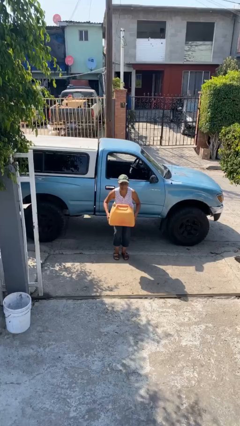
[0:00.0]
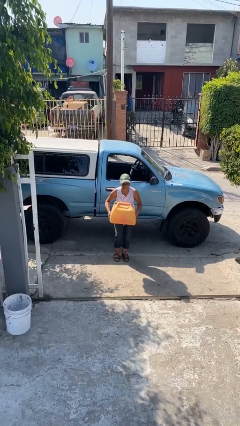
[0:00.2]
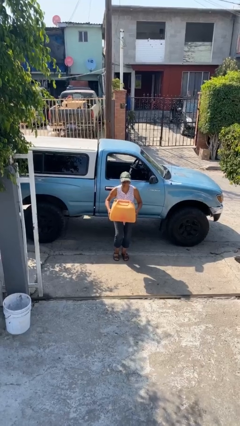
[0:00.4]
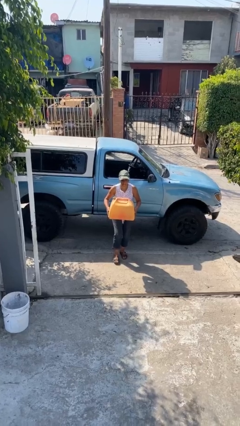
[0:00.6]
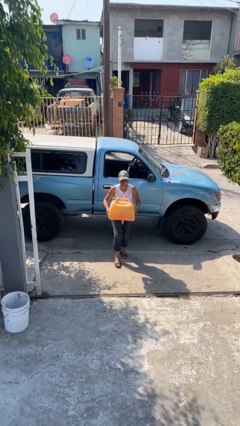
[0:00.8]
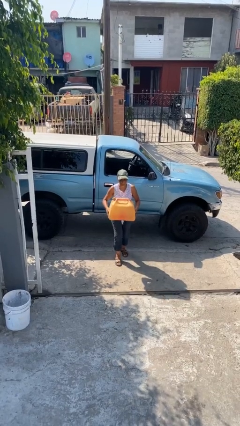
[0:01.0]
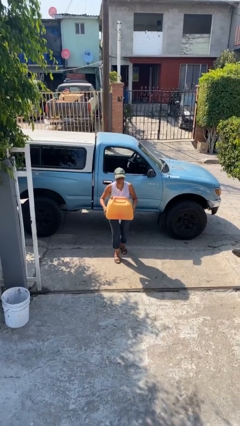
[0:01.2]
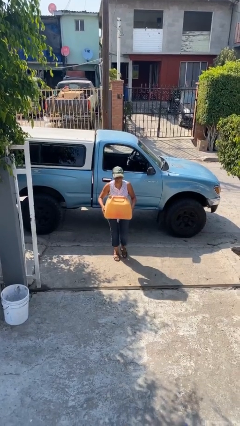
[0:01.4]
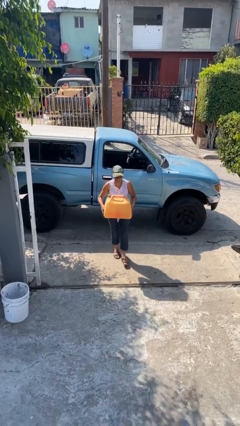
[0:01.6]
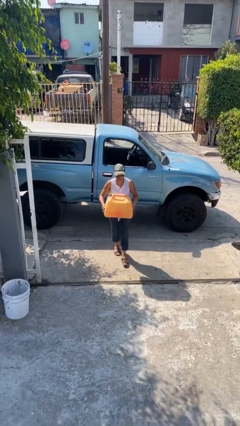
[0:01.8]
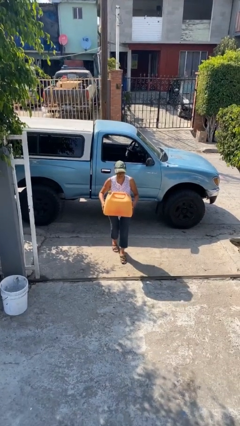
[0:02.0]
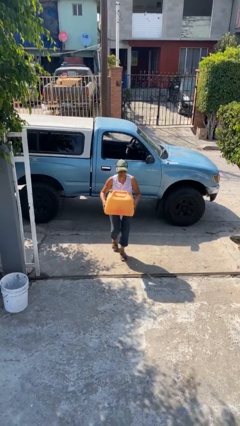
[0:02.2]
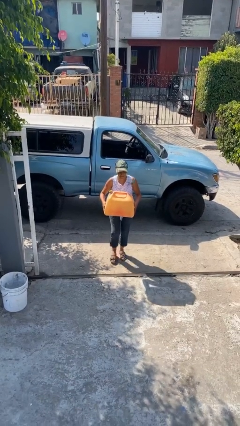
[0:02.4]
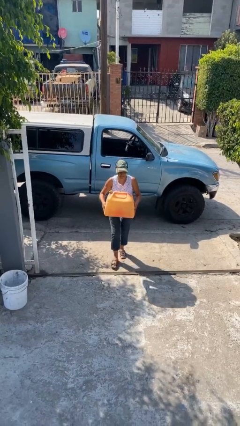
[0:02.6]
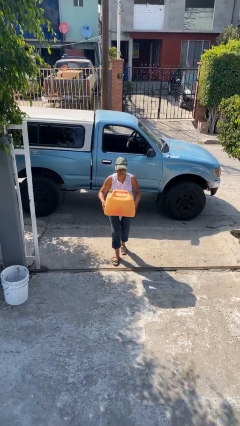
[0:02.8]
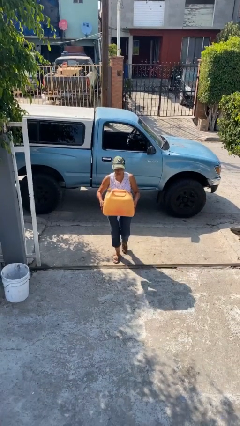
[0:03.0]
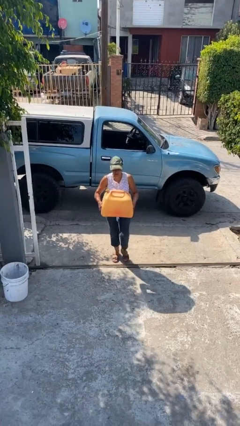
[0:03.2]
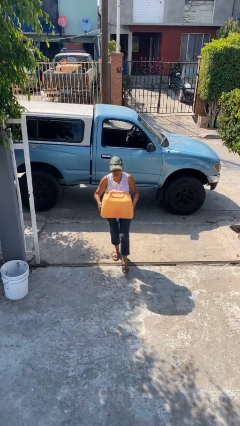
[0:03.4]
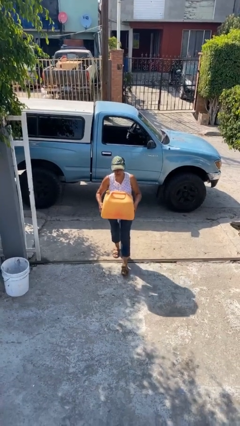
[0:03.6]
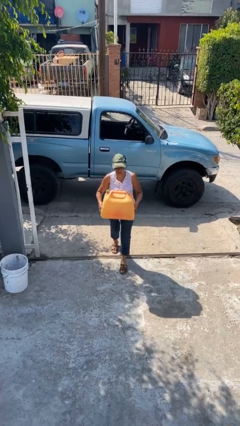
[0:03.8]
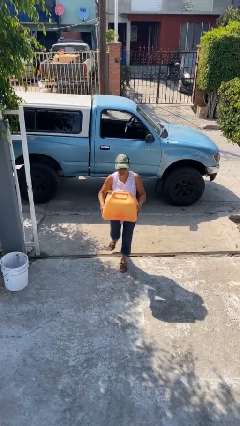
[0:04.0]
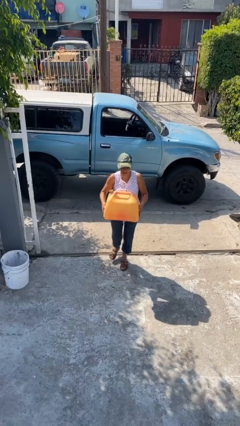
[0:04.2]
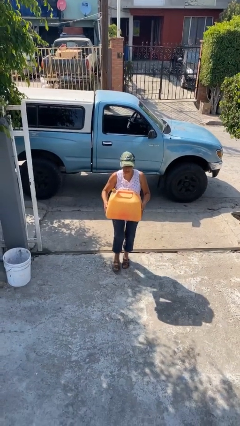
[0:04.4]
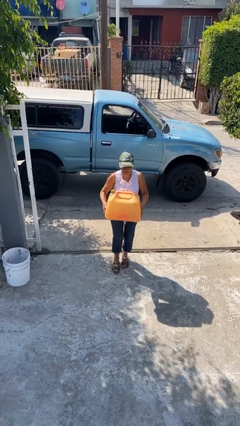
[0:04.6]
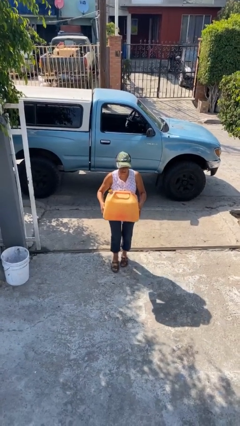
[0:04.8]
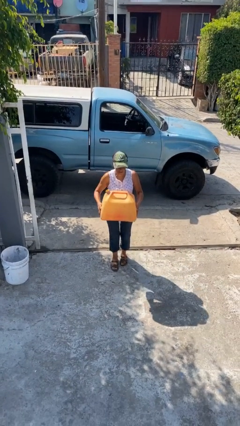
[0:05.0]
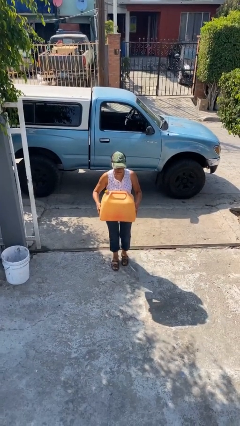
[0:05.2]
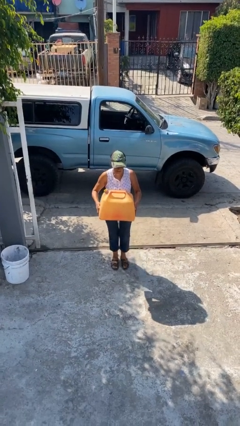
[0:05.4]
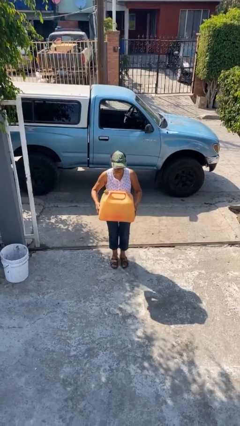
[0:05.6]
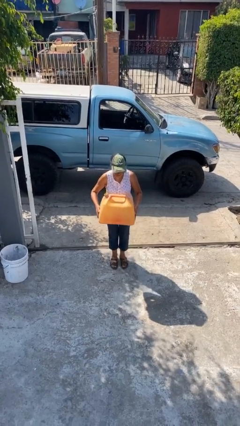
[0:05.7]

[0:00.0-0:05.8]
person carries heavy object

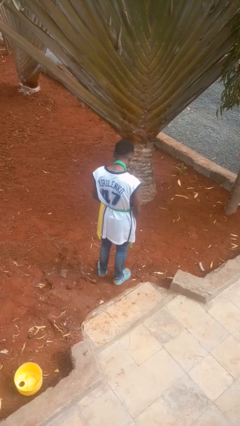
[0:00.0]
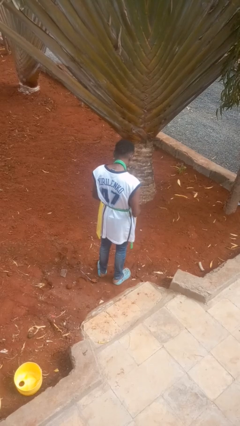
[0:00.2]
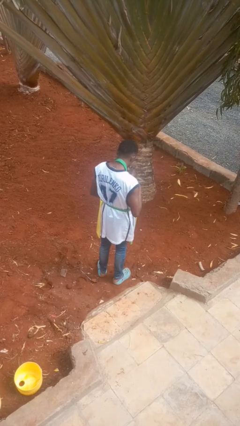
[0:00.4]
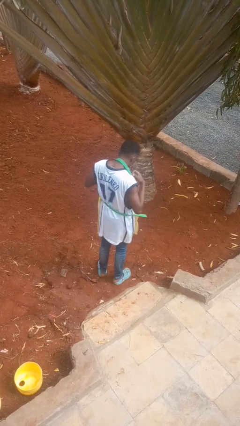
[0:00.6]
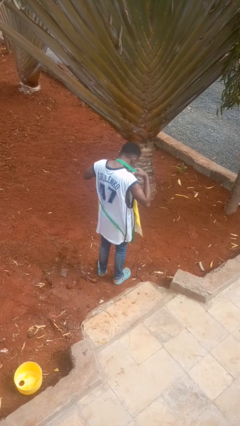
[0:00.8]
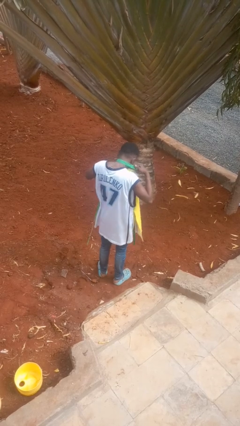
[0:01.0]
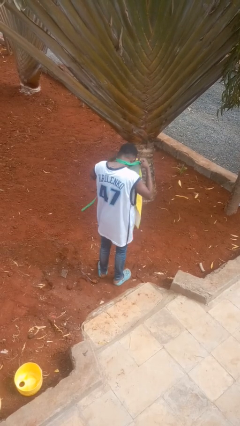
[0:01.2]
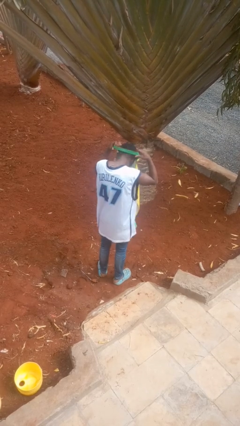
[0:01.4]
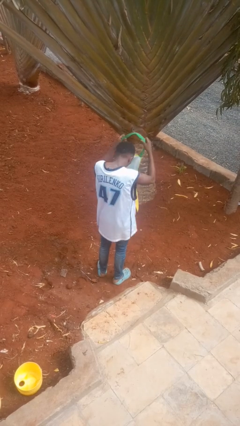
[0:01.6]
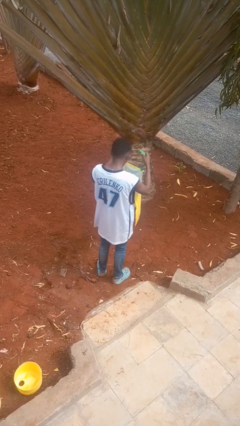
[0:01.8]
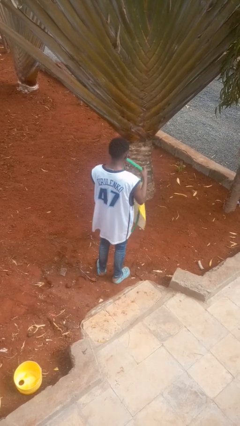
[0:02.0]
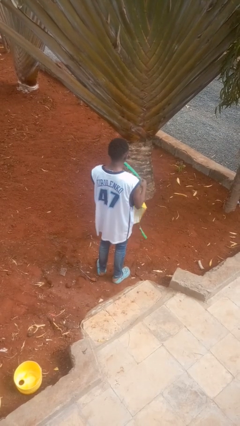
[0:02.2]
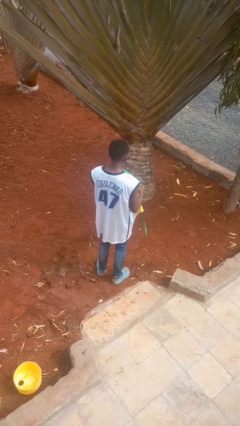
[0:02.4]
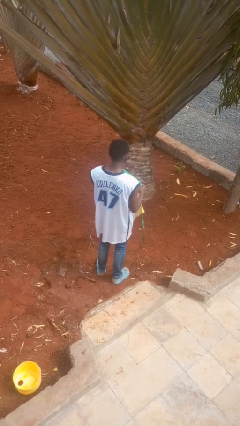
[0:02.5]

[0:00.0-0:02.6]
person takes off apron

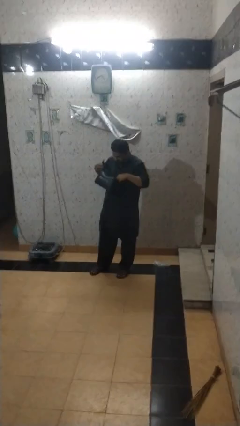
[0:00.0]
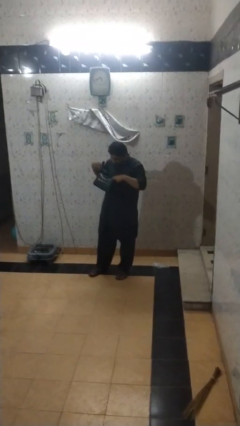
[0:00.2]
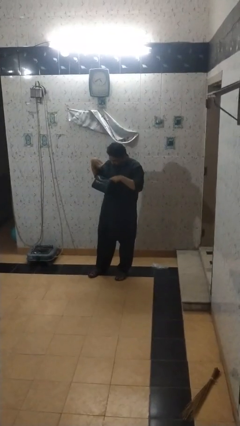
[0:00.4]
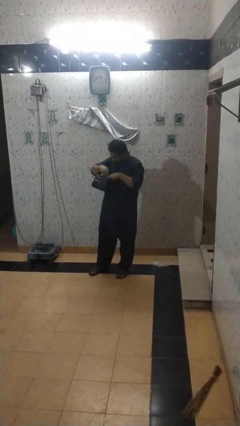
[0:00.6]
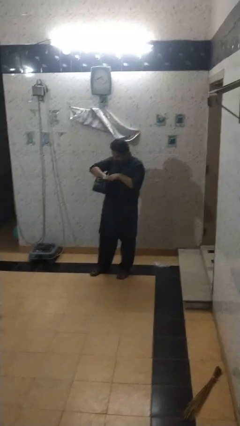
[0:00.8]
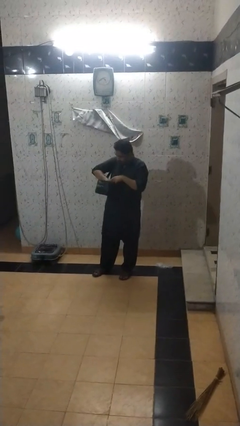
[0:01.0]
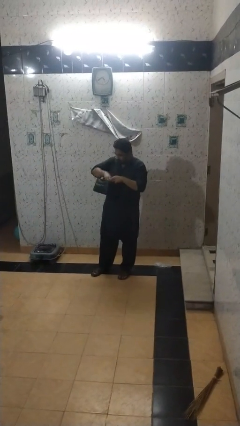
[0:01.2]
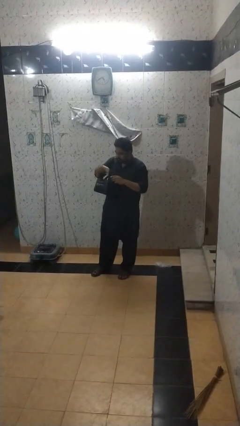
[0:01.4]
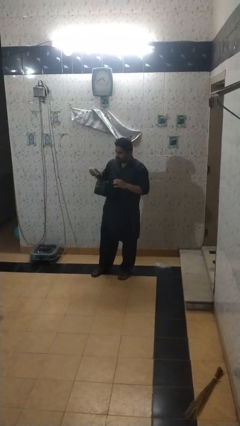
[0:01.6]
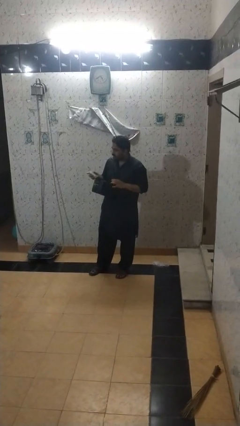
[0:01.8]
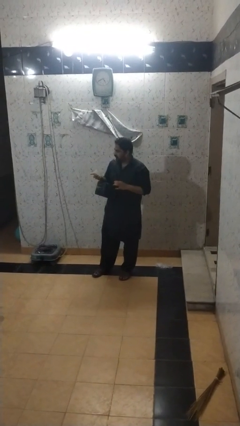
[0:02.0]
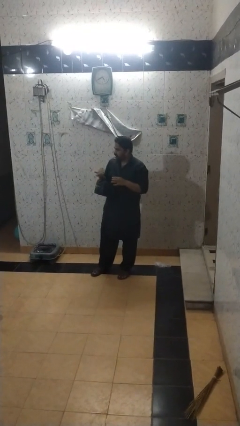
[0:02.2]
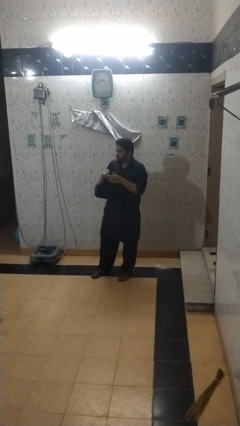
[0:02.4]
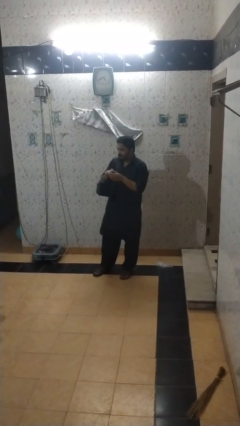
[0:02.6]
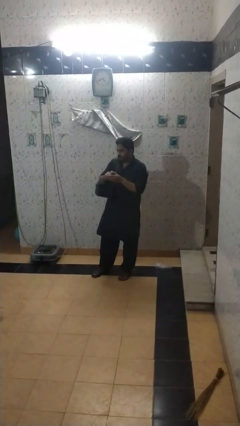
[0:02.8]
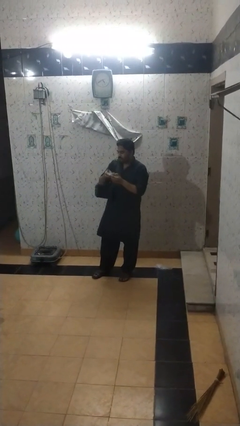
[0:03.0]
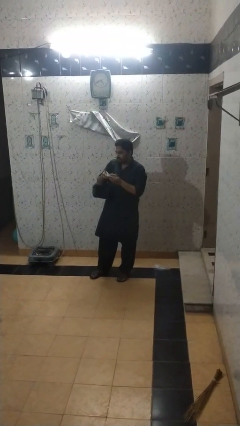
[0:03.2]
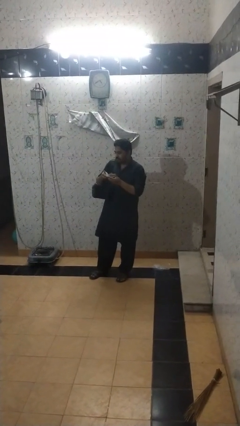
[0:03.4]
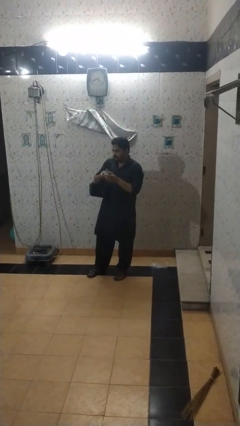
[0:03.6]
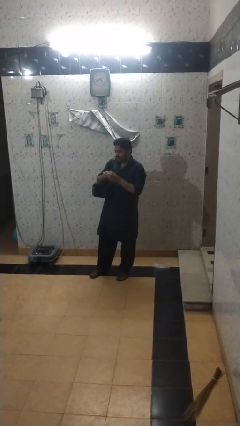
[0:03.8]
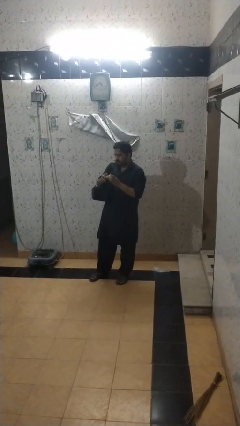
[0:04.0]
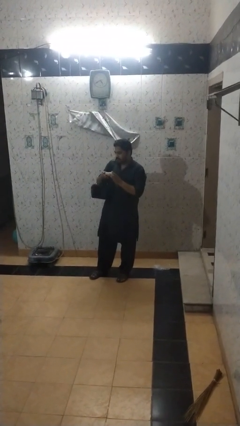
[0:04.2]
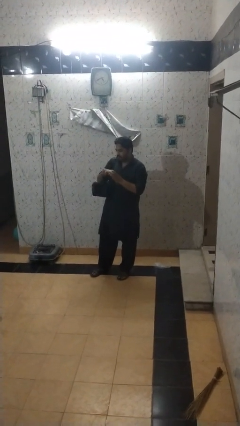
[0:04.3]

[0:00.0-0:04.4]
person takes object from backpack

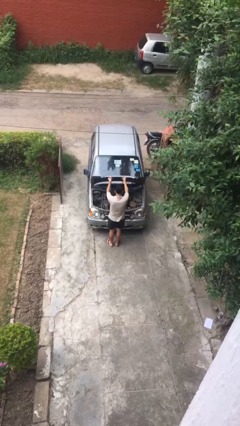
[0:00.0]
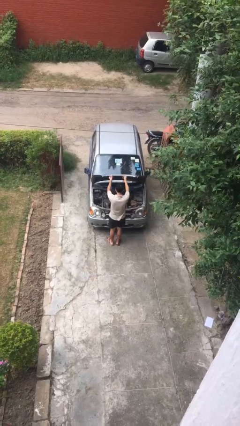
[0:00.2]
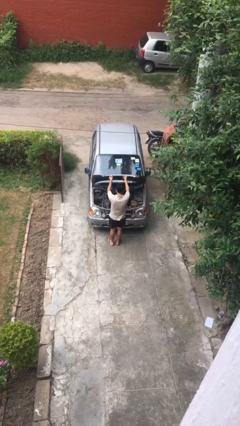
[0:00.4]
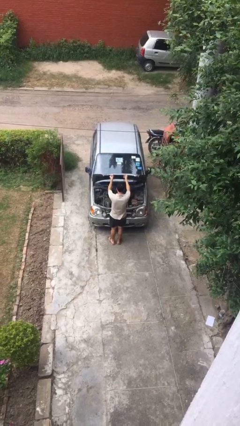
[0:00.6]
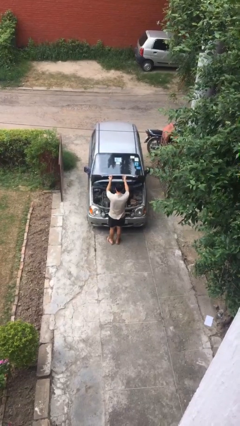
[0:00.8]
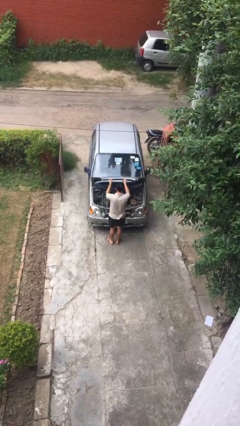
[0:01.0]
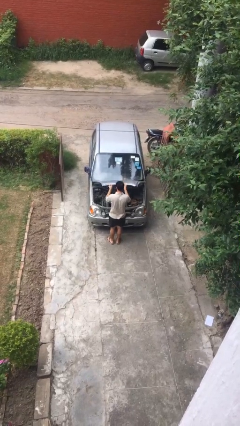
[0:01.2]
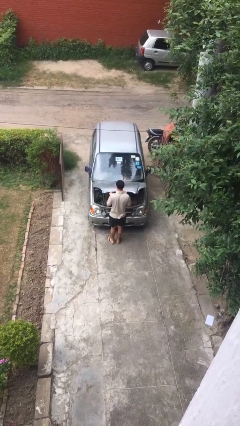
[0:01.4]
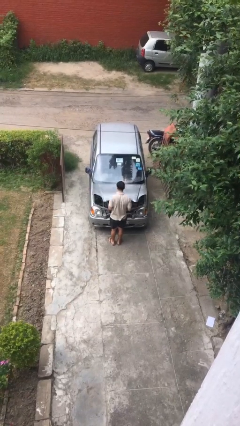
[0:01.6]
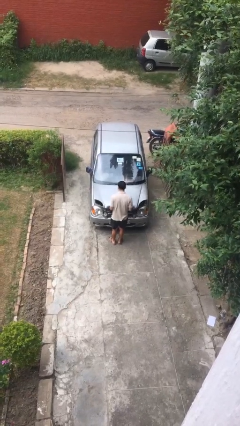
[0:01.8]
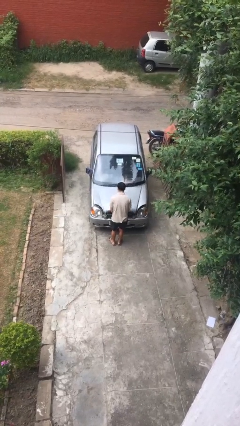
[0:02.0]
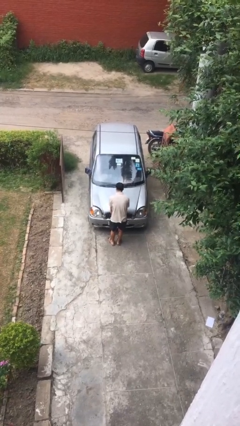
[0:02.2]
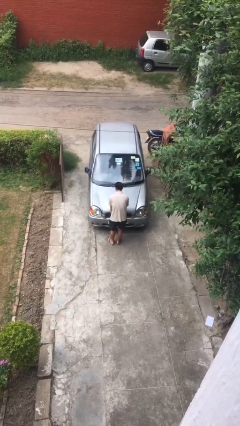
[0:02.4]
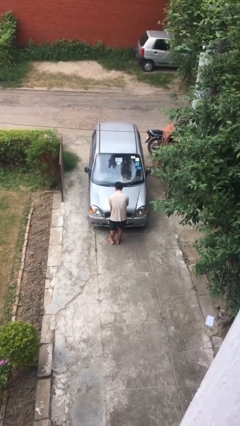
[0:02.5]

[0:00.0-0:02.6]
person closes car hood

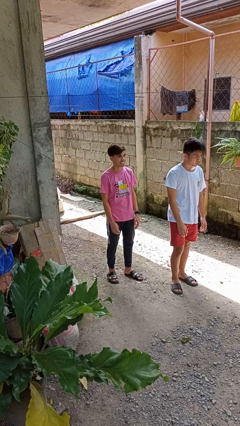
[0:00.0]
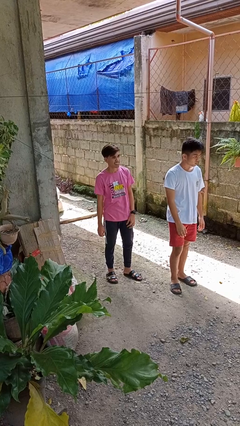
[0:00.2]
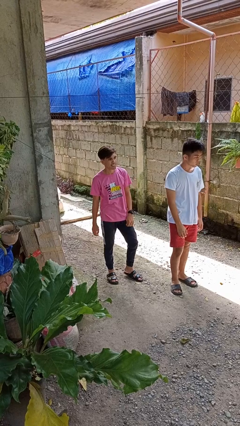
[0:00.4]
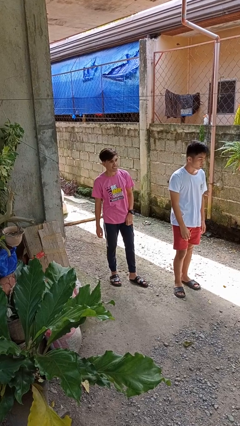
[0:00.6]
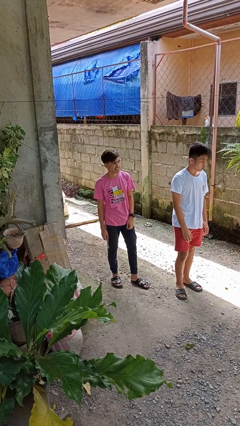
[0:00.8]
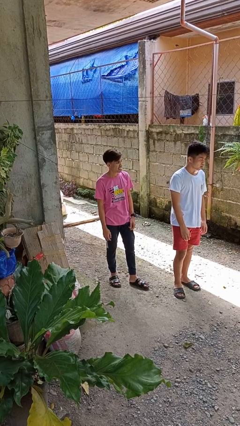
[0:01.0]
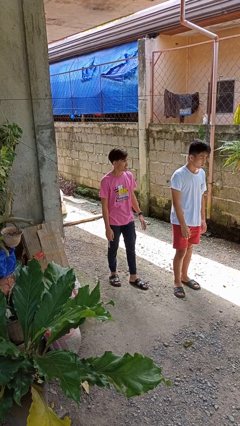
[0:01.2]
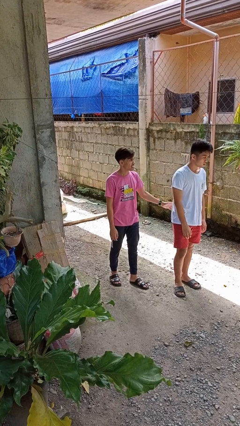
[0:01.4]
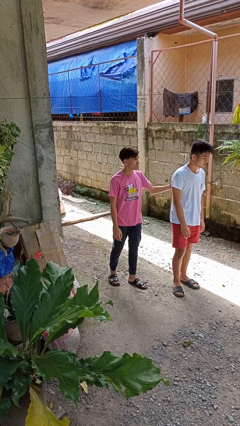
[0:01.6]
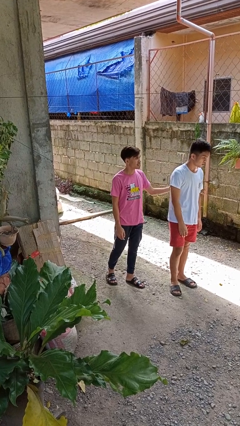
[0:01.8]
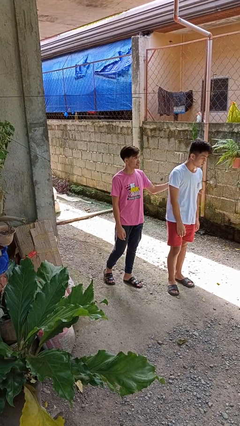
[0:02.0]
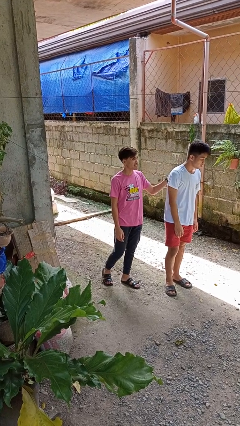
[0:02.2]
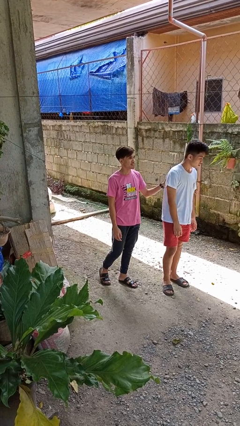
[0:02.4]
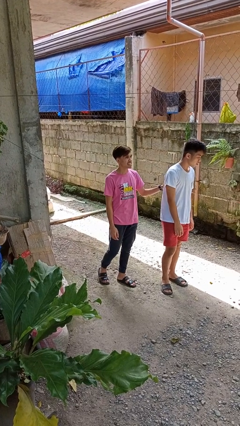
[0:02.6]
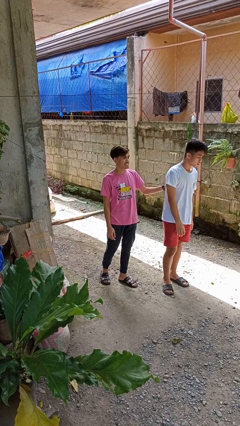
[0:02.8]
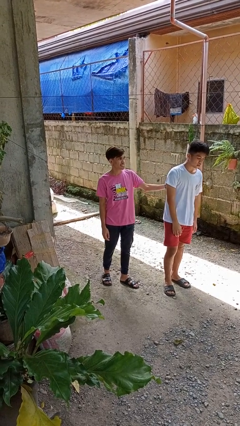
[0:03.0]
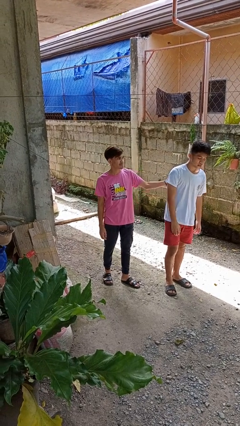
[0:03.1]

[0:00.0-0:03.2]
person touches back of person
